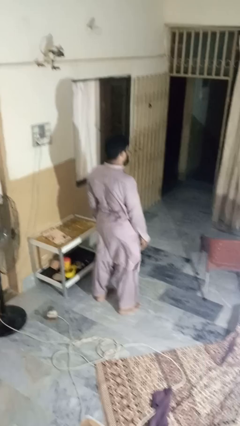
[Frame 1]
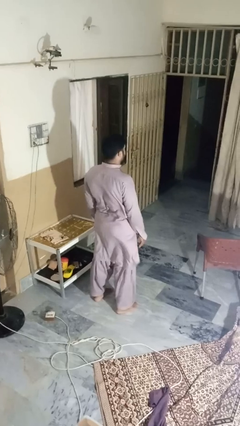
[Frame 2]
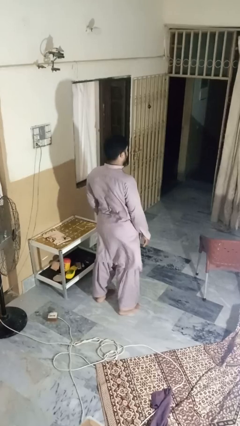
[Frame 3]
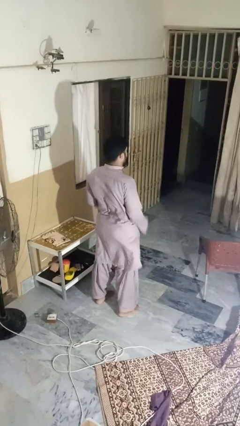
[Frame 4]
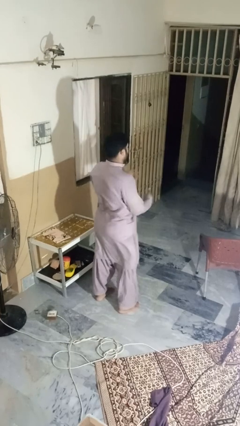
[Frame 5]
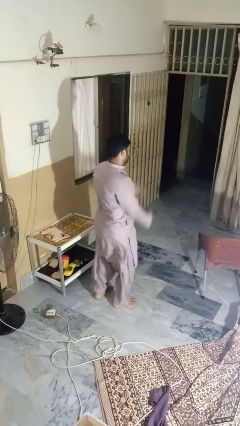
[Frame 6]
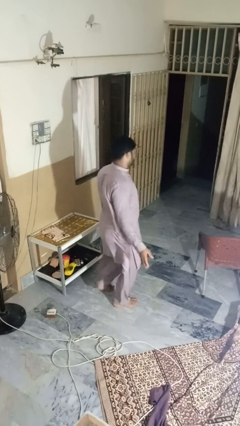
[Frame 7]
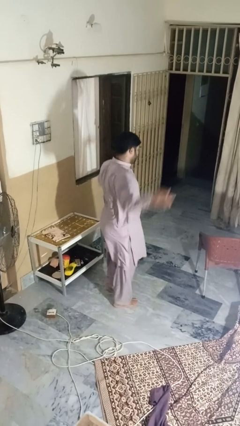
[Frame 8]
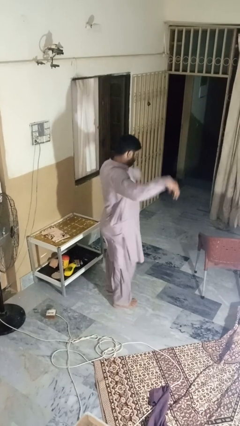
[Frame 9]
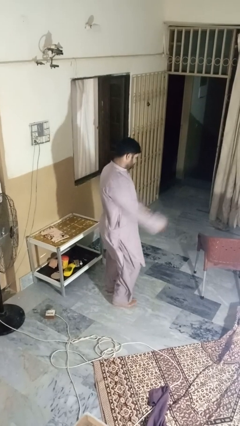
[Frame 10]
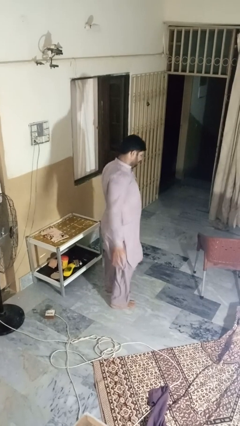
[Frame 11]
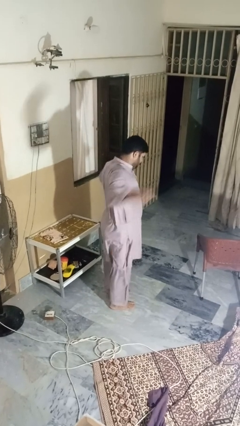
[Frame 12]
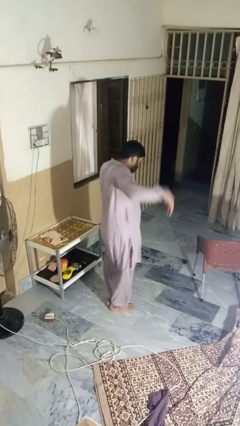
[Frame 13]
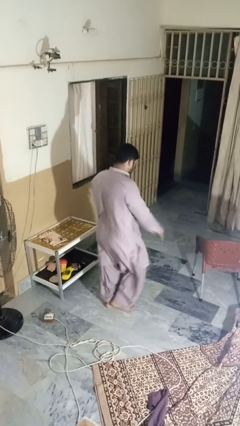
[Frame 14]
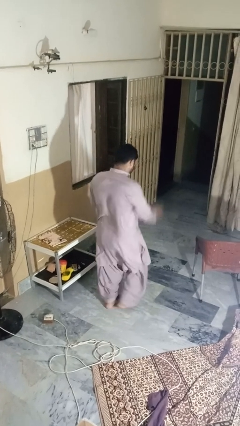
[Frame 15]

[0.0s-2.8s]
person dances in place

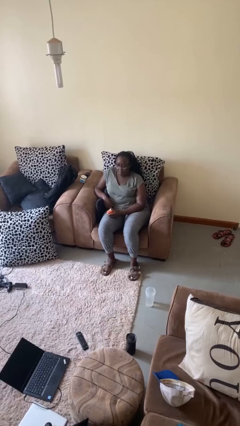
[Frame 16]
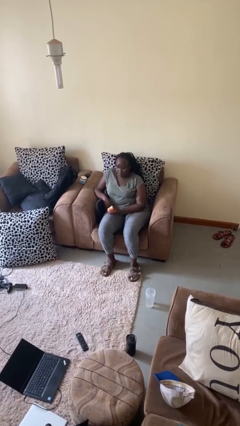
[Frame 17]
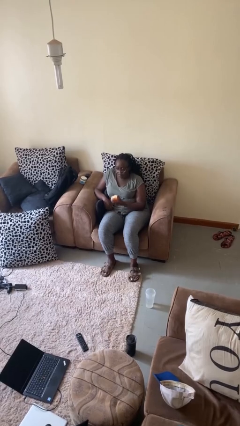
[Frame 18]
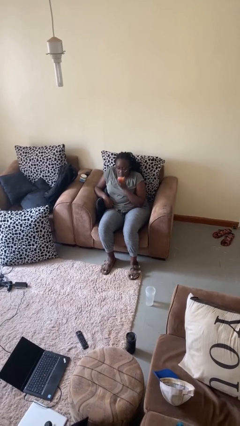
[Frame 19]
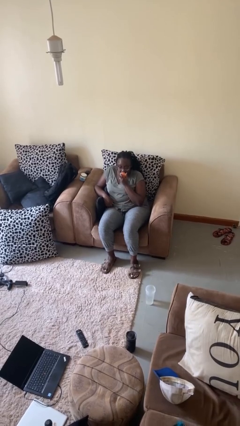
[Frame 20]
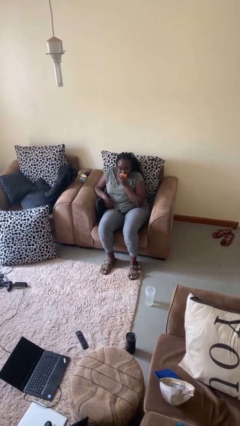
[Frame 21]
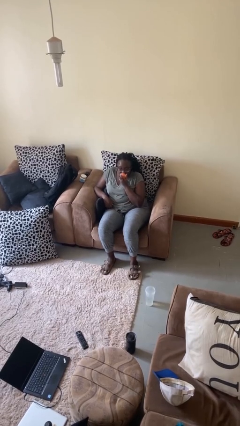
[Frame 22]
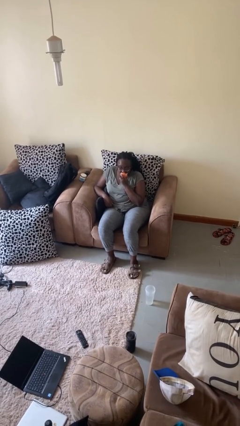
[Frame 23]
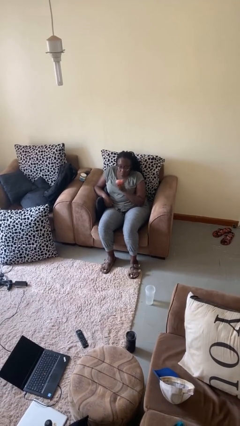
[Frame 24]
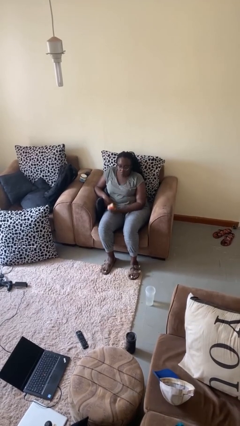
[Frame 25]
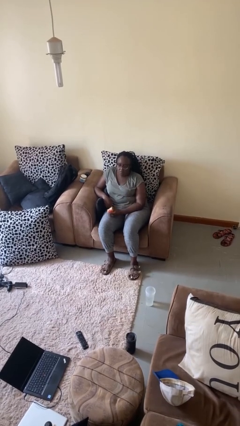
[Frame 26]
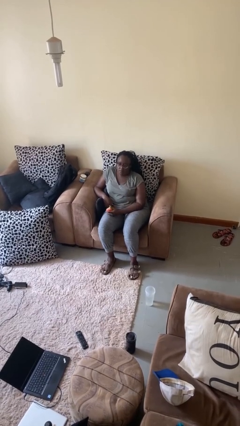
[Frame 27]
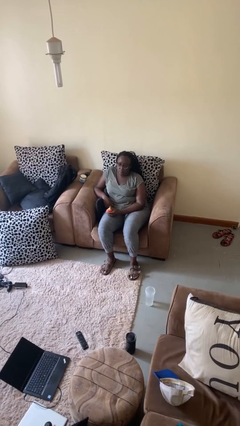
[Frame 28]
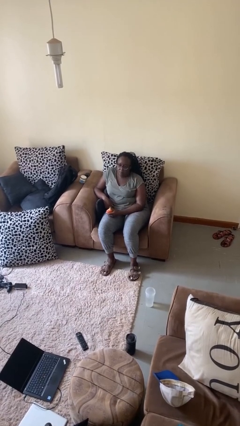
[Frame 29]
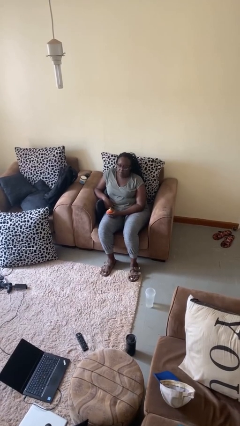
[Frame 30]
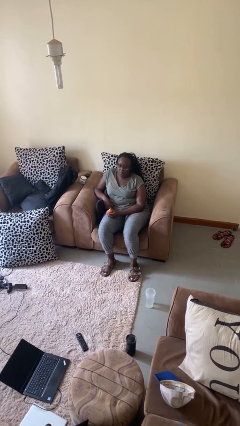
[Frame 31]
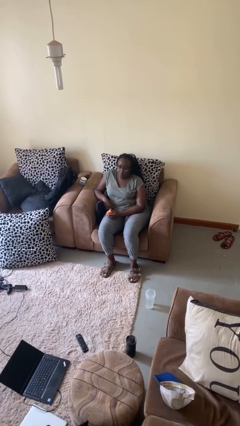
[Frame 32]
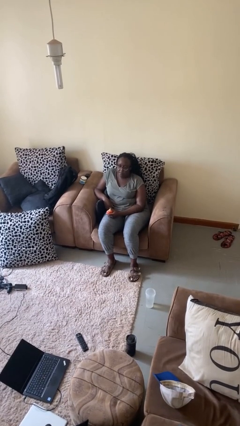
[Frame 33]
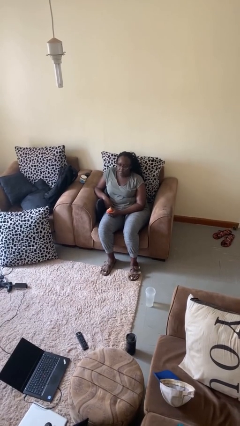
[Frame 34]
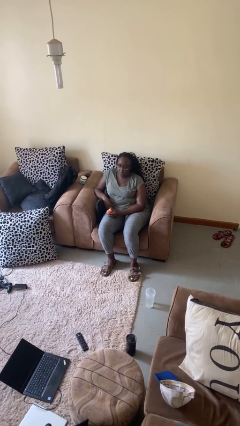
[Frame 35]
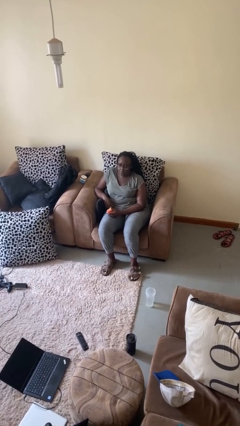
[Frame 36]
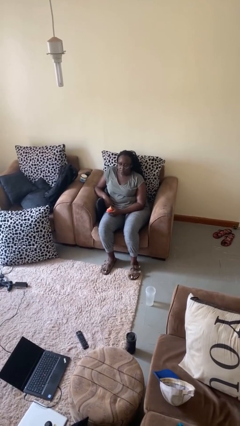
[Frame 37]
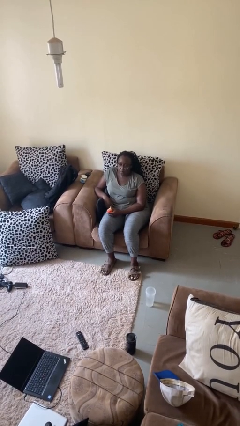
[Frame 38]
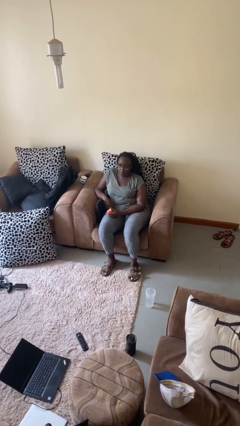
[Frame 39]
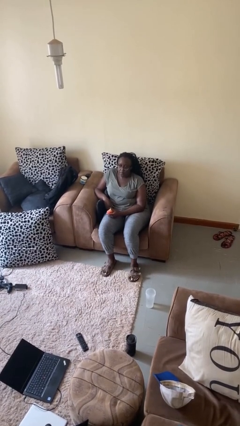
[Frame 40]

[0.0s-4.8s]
person eats apple

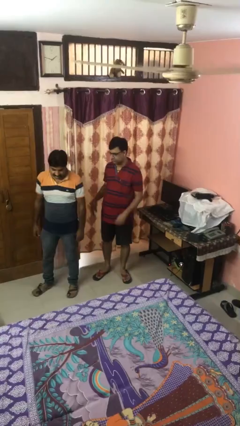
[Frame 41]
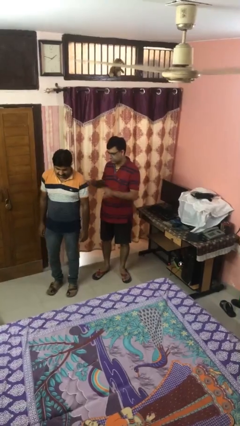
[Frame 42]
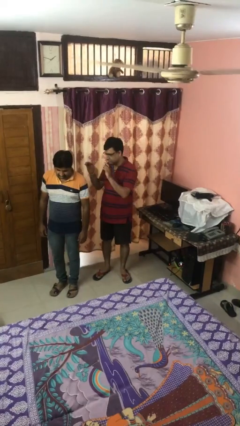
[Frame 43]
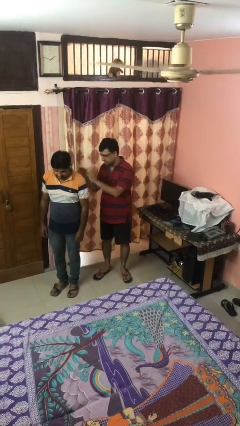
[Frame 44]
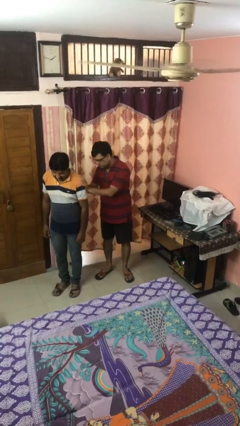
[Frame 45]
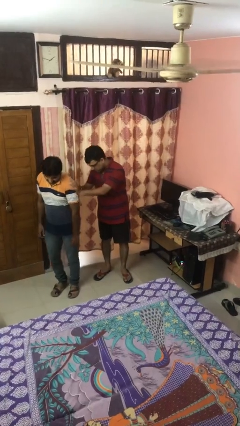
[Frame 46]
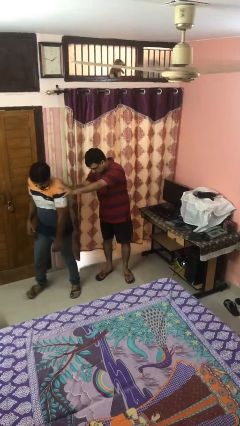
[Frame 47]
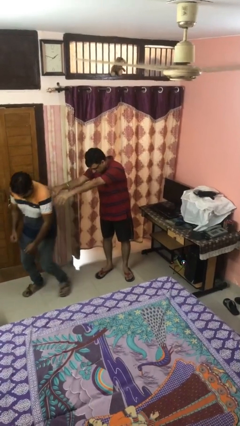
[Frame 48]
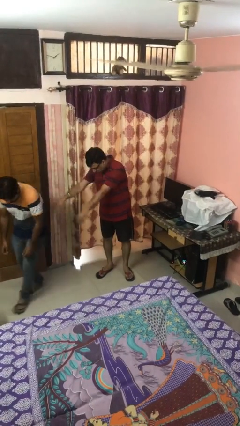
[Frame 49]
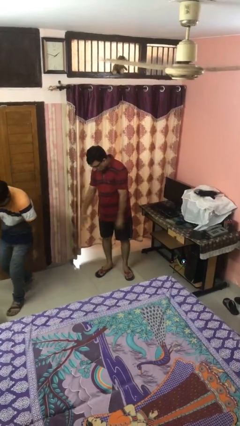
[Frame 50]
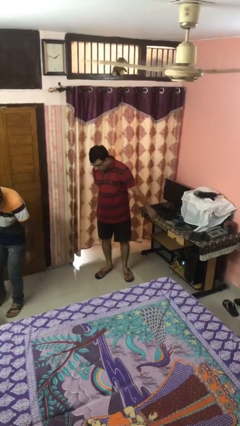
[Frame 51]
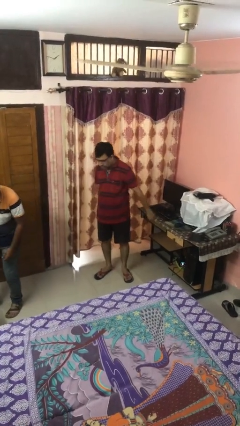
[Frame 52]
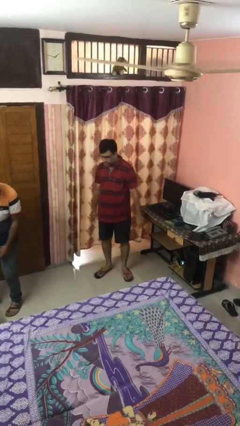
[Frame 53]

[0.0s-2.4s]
person shoves person

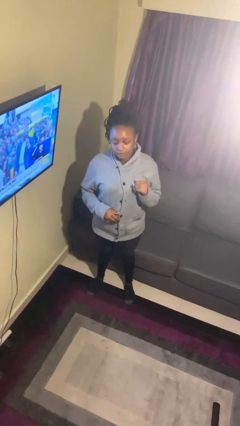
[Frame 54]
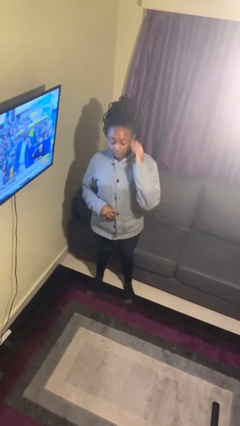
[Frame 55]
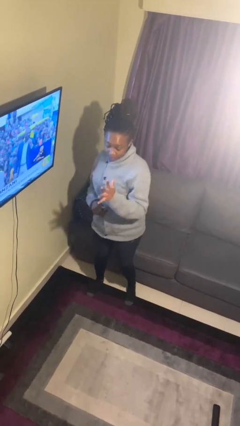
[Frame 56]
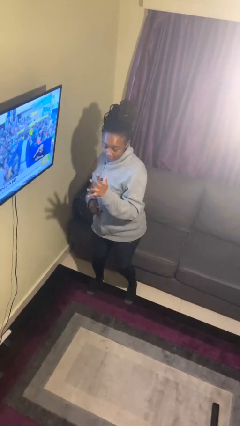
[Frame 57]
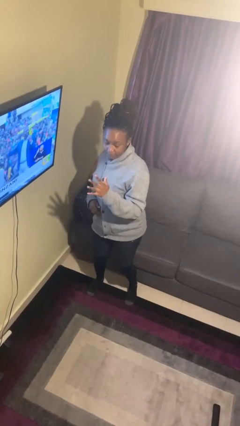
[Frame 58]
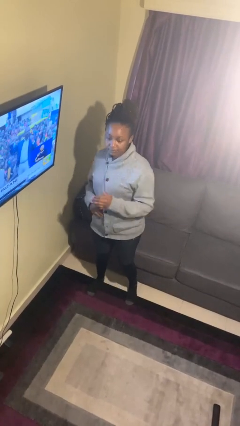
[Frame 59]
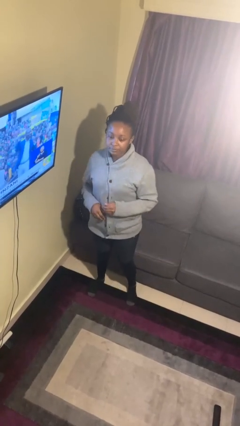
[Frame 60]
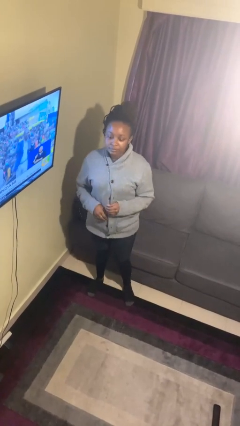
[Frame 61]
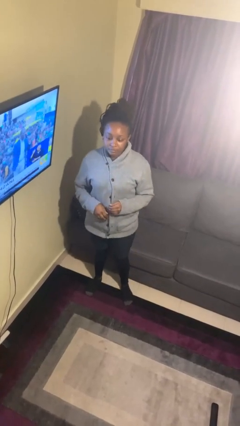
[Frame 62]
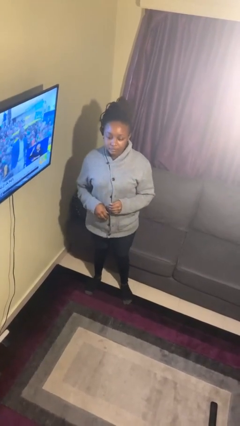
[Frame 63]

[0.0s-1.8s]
person karate chop

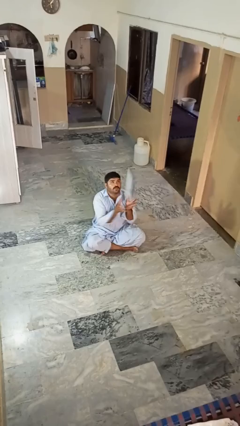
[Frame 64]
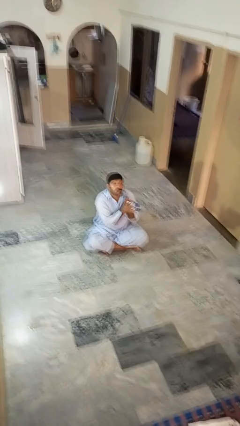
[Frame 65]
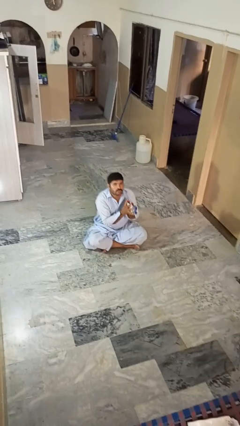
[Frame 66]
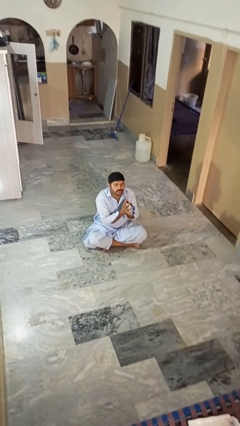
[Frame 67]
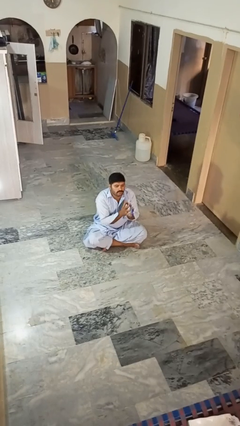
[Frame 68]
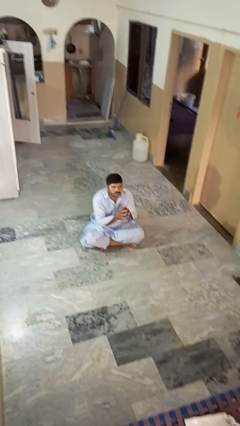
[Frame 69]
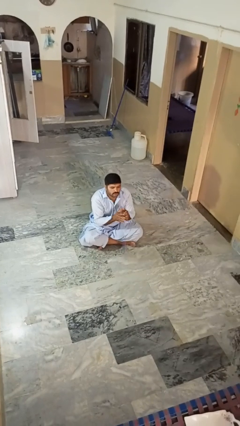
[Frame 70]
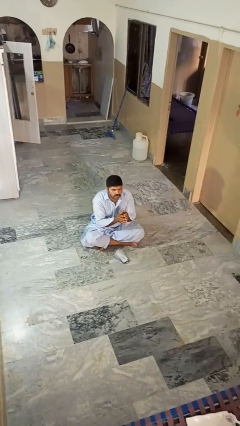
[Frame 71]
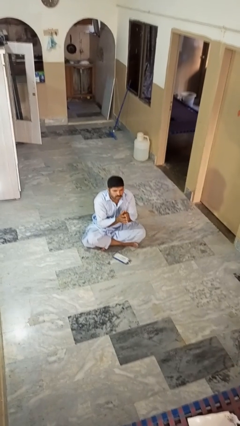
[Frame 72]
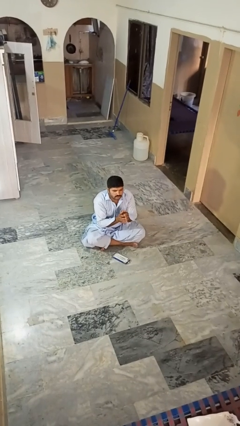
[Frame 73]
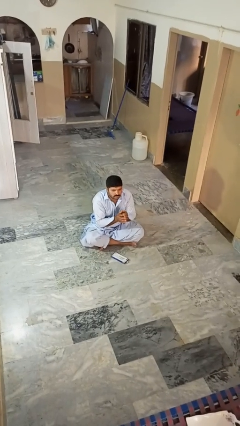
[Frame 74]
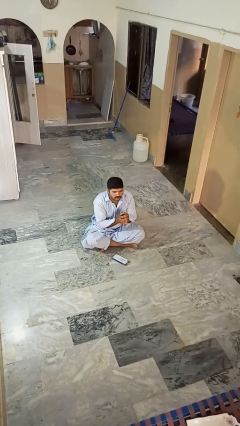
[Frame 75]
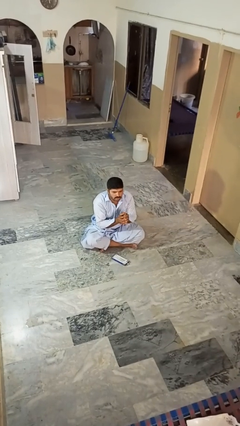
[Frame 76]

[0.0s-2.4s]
person catches dropped object

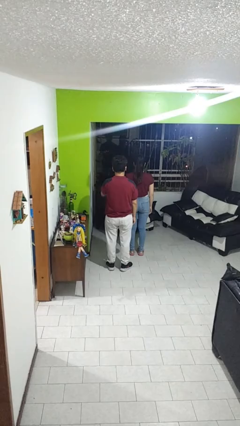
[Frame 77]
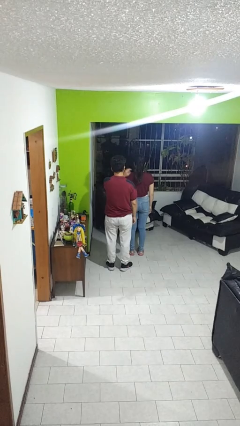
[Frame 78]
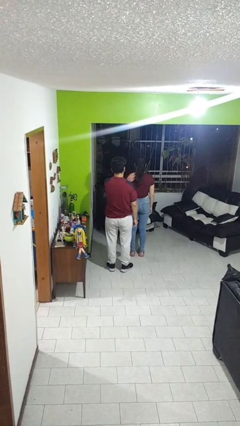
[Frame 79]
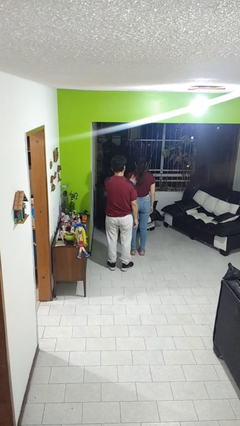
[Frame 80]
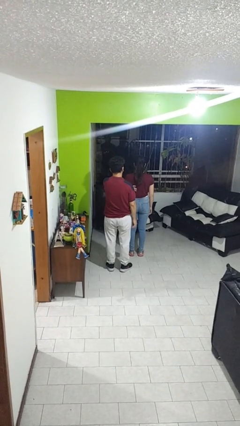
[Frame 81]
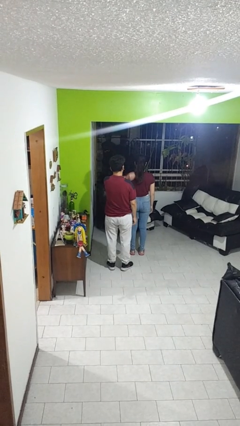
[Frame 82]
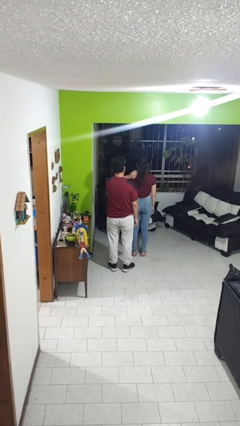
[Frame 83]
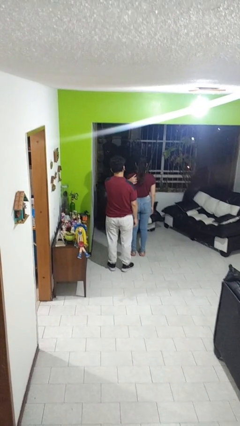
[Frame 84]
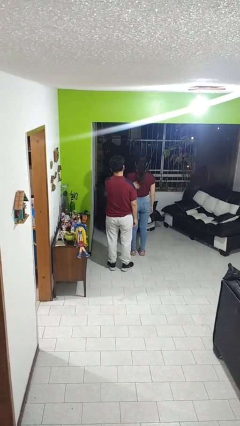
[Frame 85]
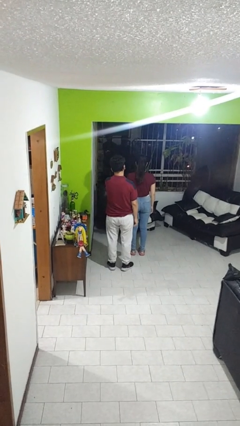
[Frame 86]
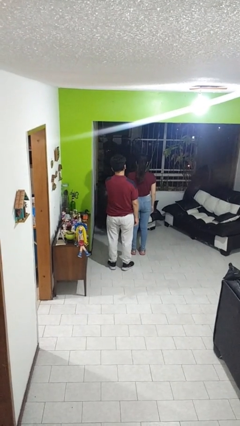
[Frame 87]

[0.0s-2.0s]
person touches back of person

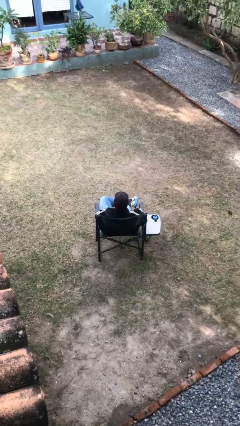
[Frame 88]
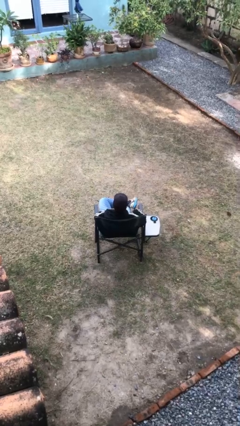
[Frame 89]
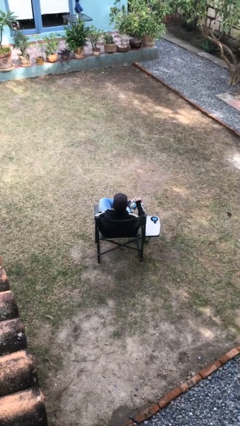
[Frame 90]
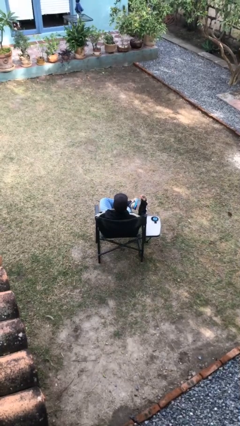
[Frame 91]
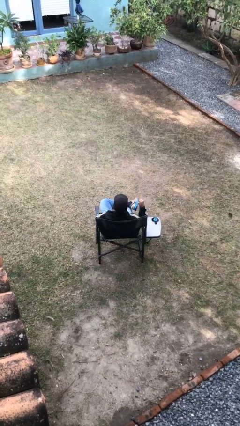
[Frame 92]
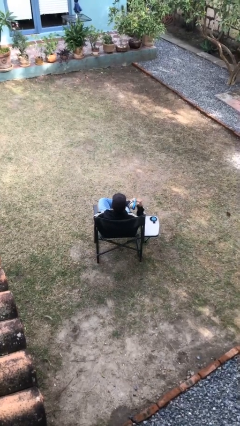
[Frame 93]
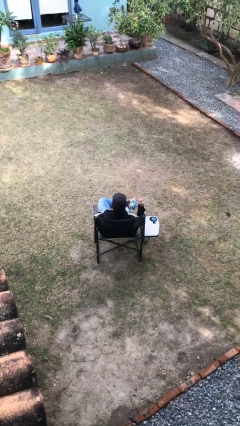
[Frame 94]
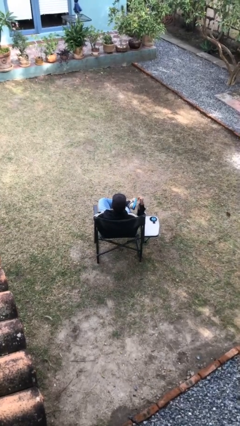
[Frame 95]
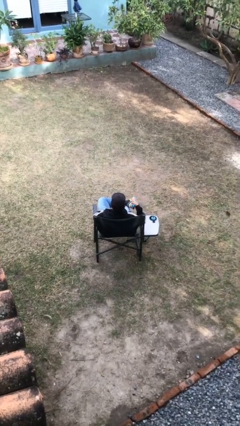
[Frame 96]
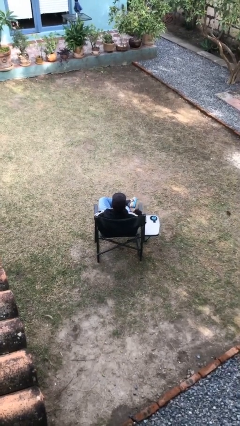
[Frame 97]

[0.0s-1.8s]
person gestures hang loose
